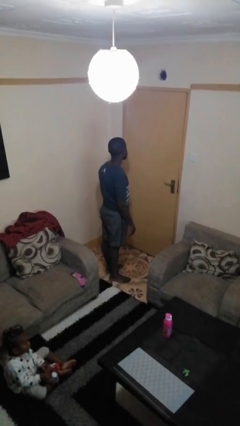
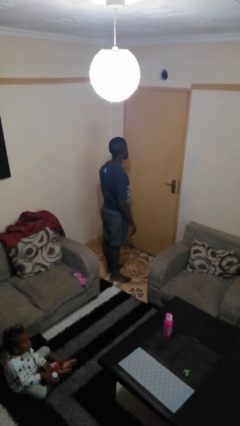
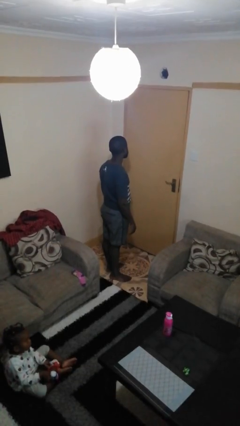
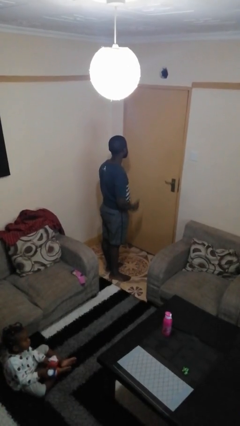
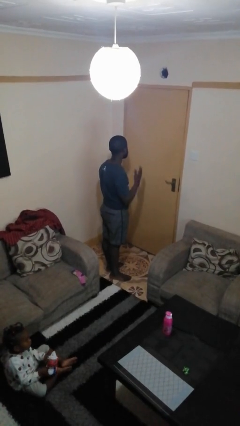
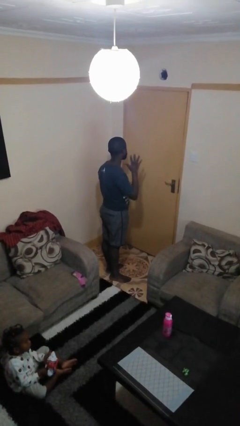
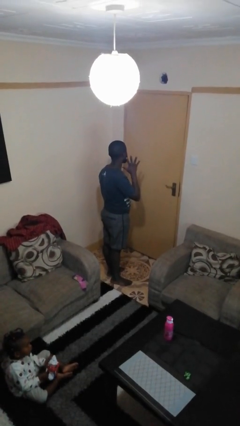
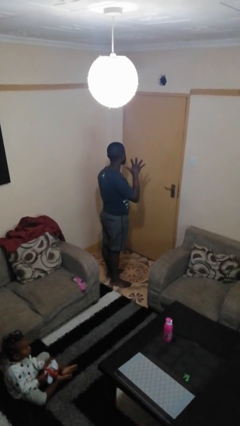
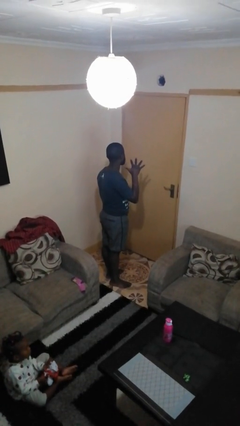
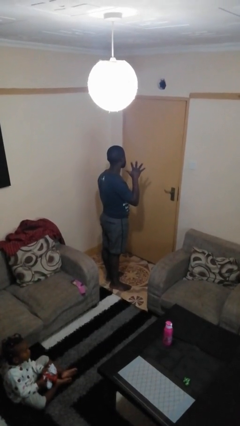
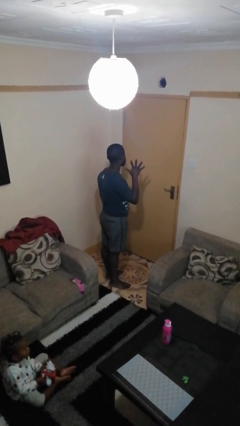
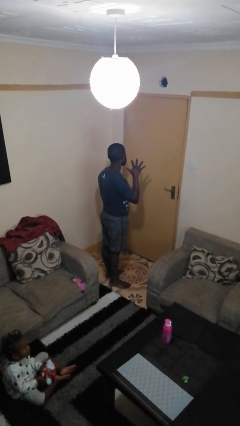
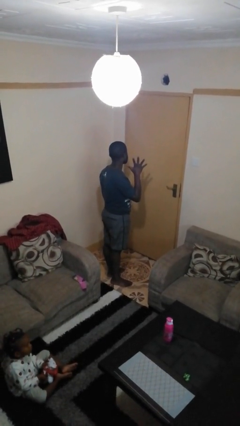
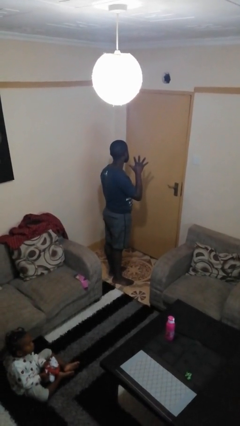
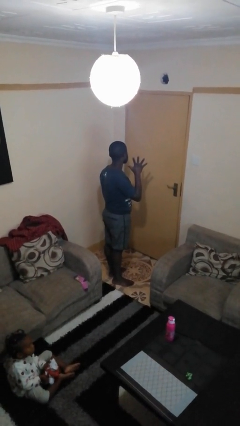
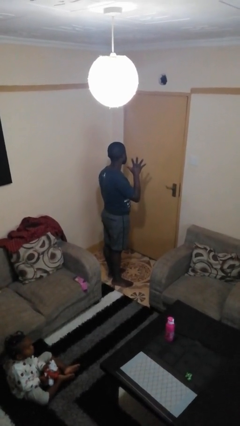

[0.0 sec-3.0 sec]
person gestures number five

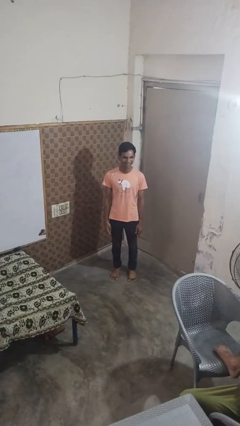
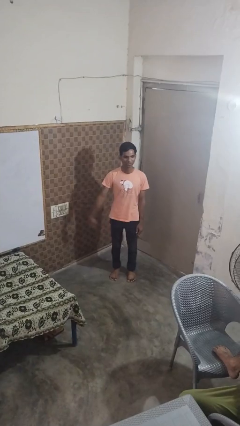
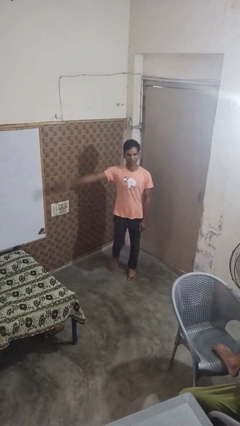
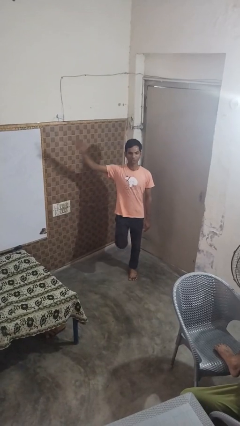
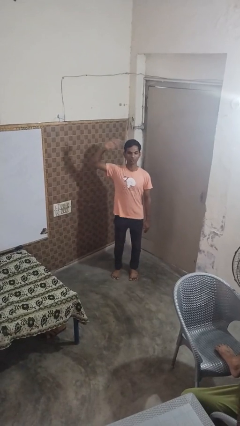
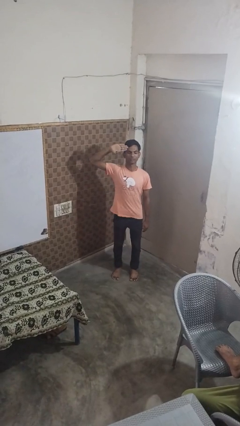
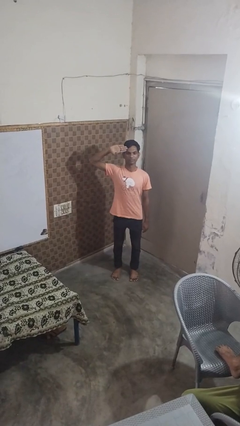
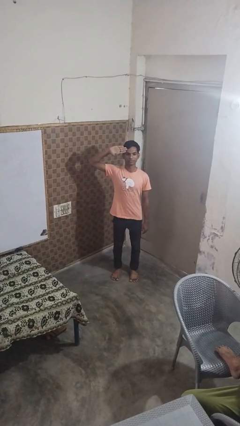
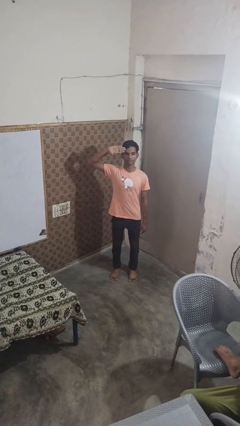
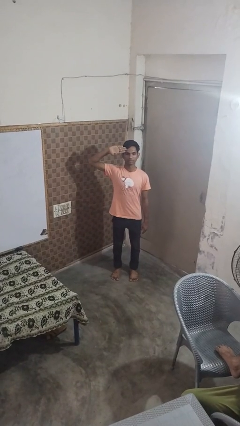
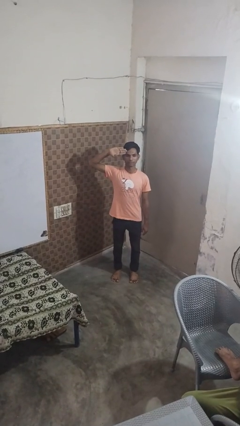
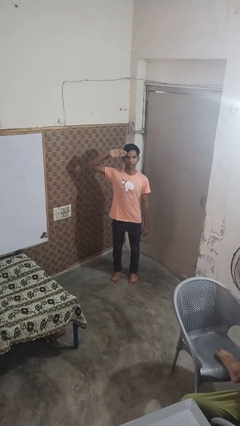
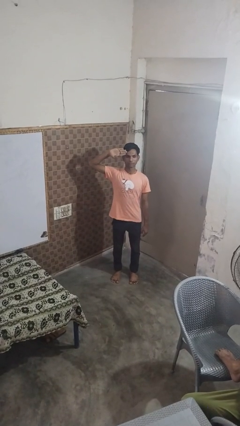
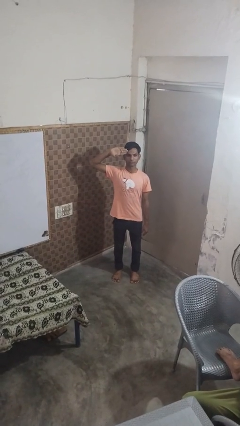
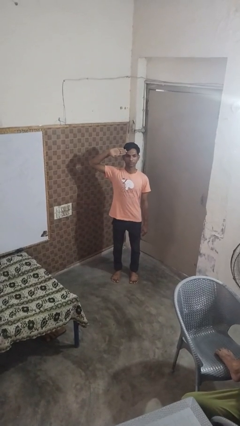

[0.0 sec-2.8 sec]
person salutes

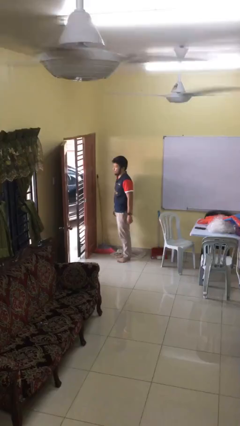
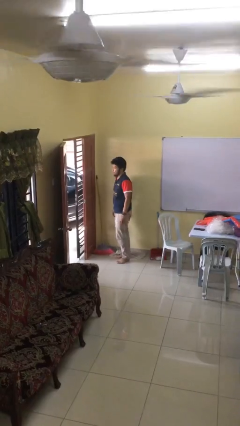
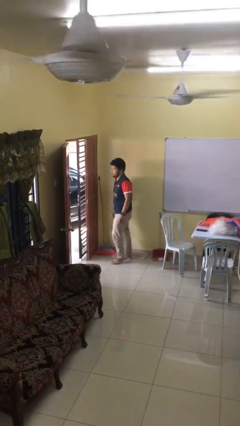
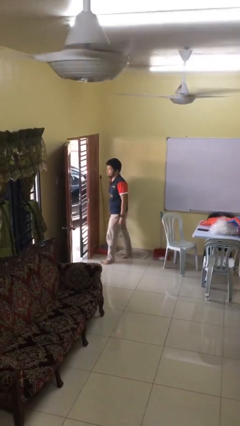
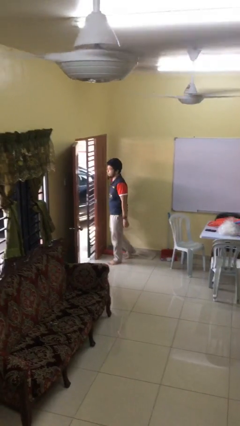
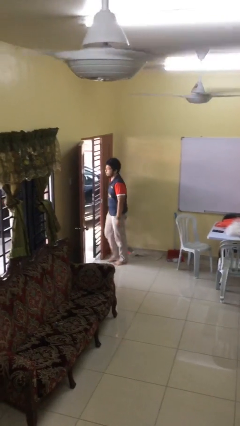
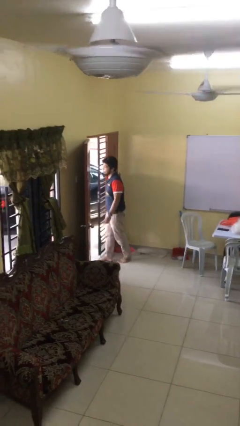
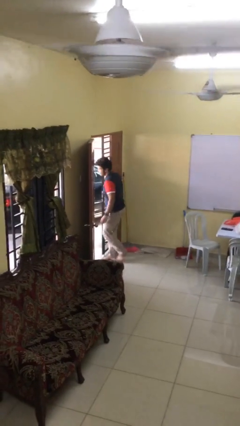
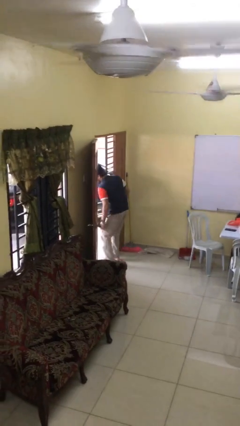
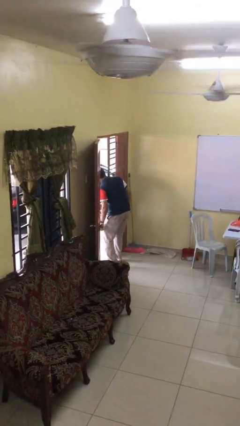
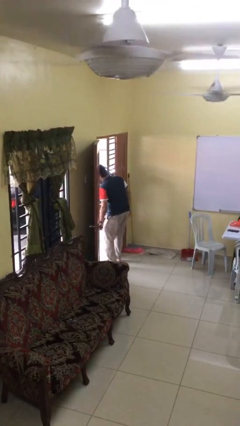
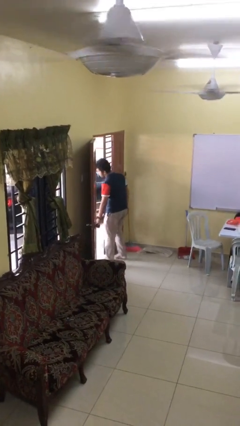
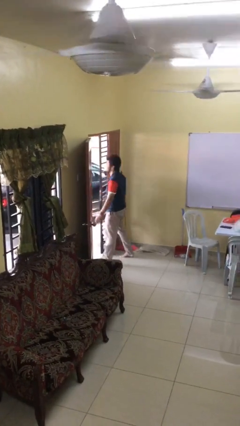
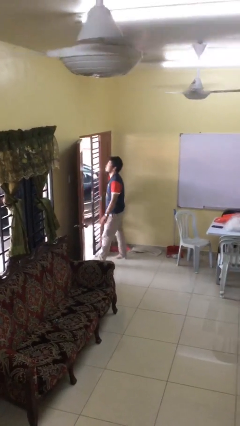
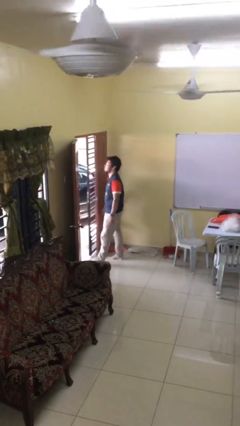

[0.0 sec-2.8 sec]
person bumps into wall

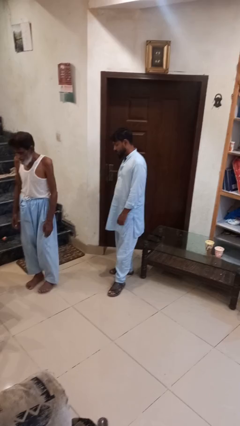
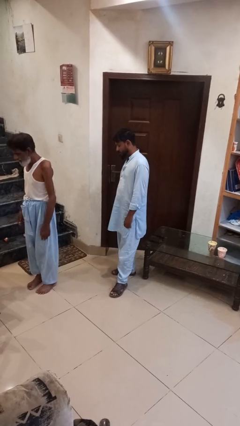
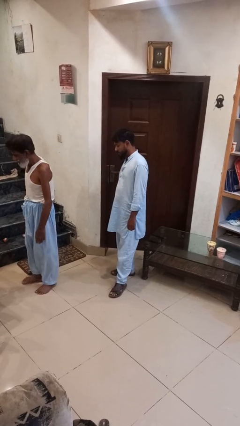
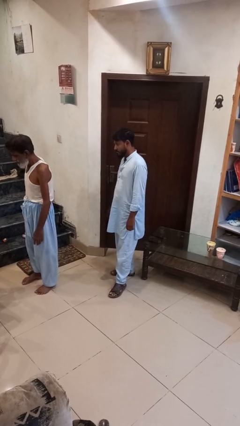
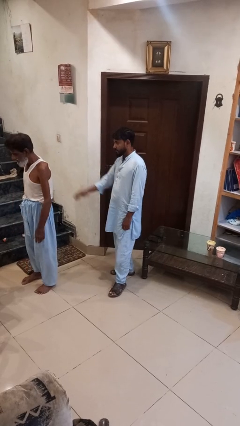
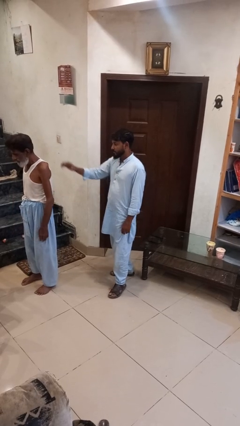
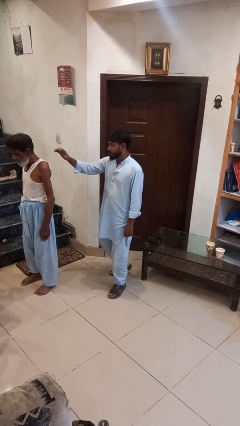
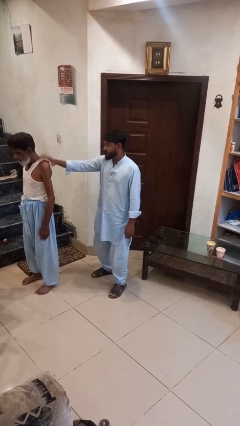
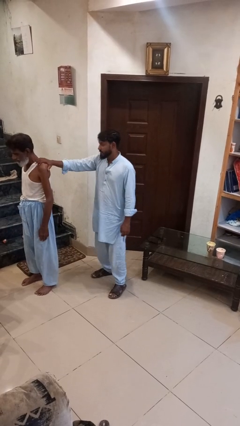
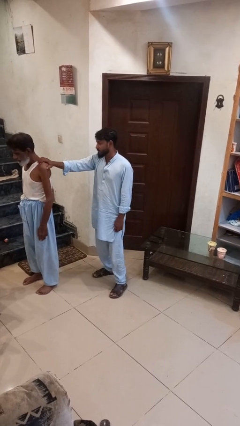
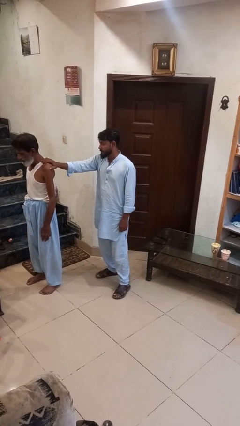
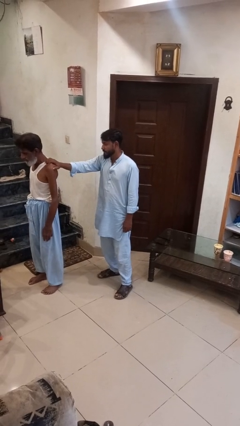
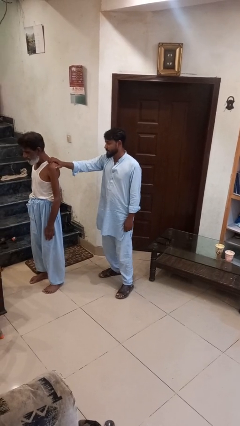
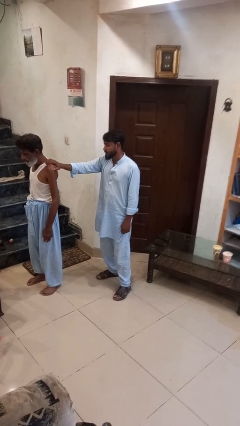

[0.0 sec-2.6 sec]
person grabs person by shoulder

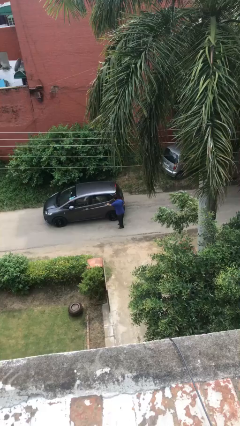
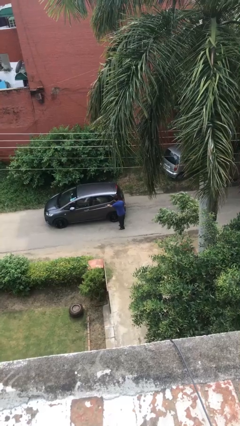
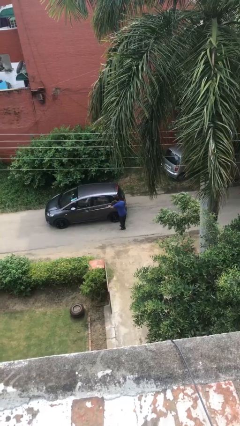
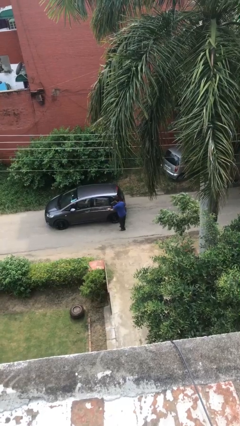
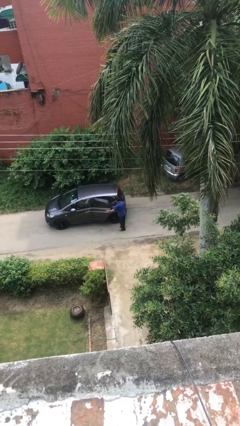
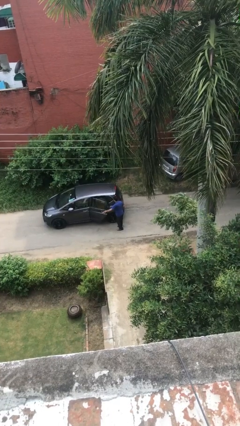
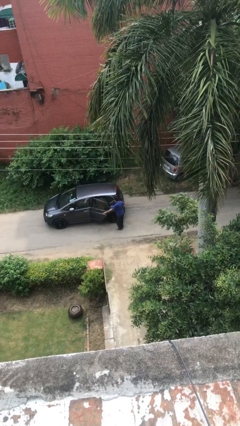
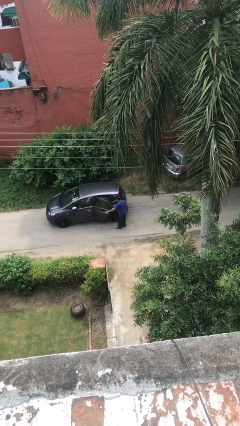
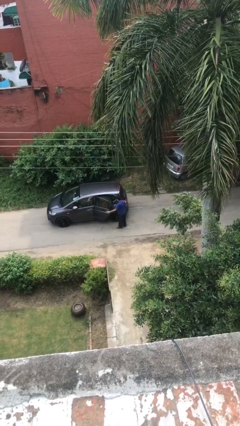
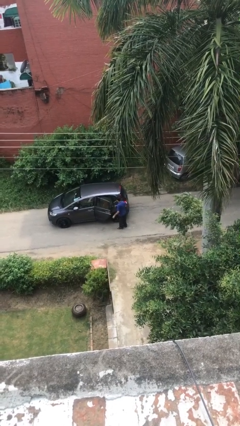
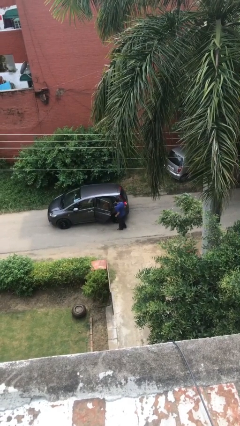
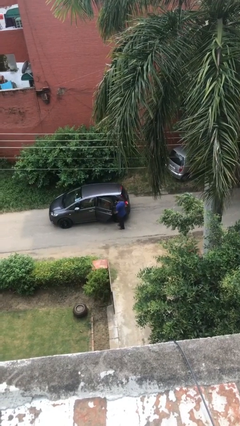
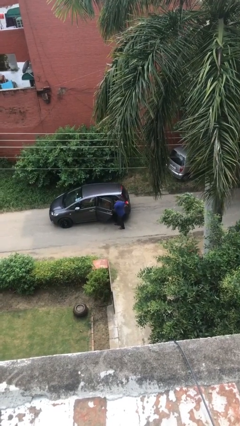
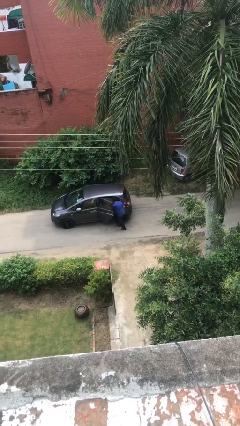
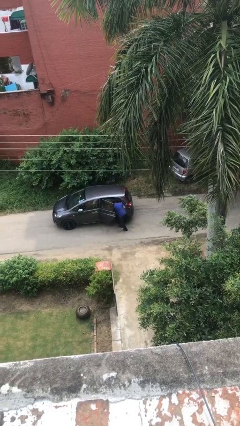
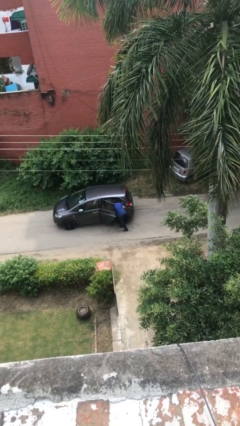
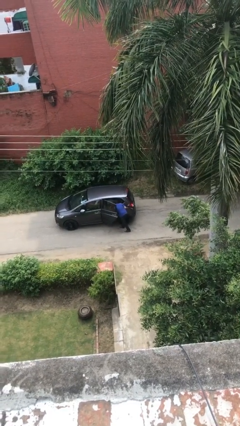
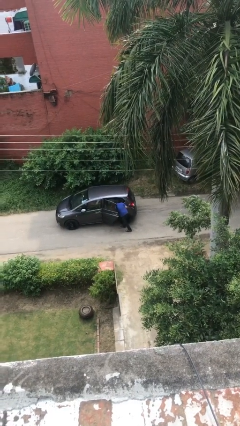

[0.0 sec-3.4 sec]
person opens car door

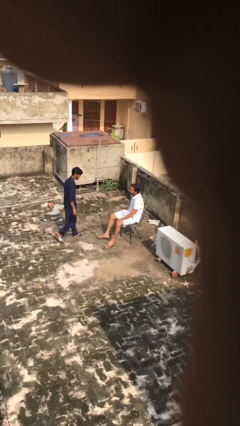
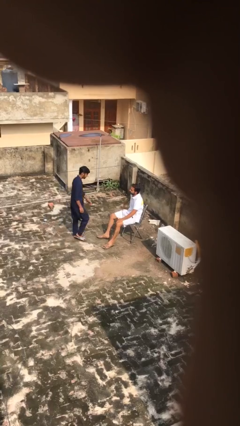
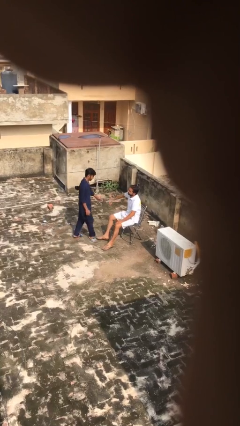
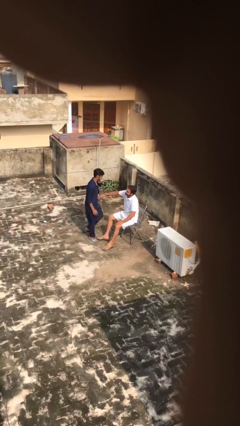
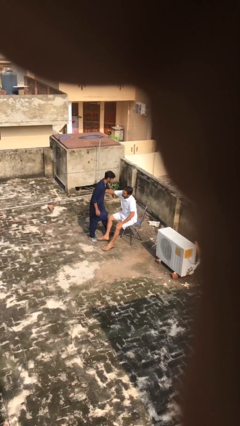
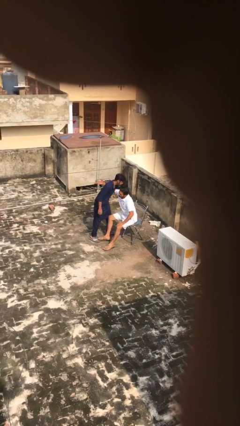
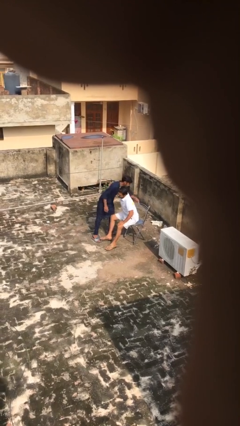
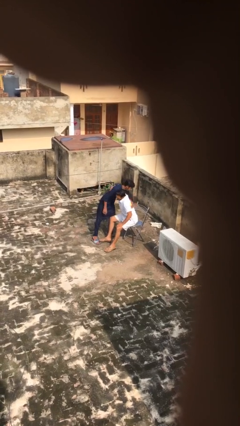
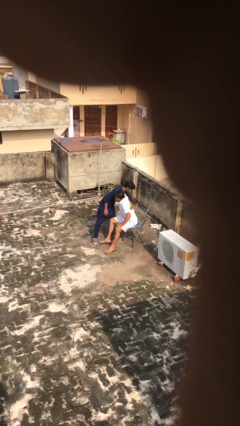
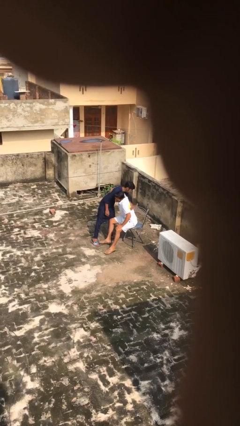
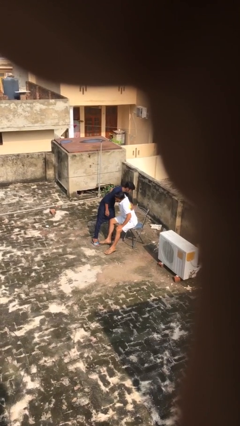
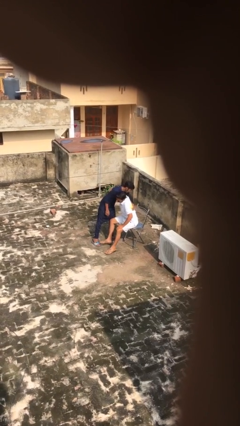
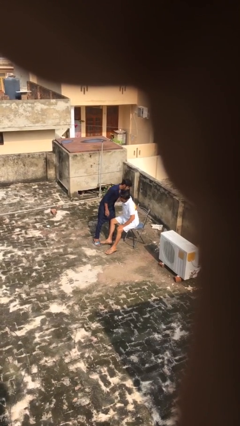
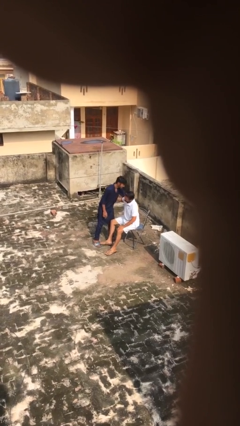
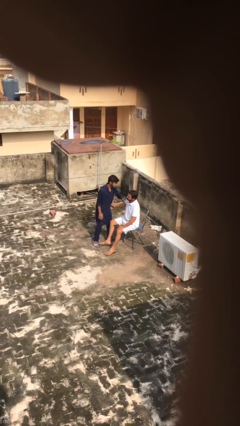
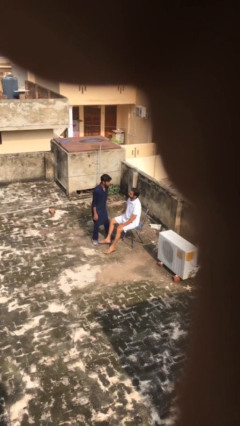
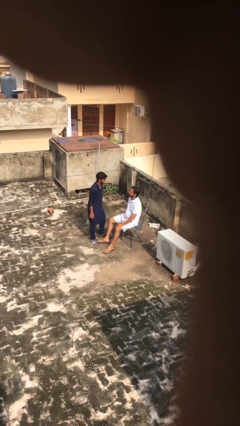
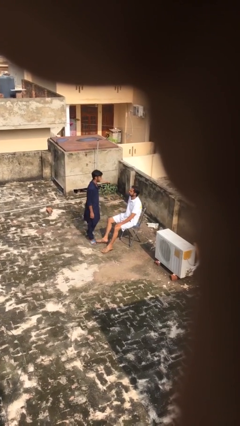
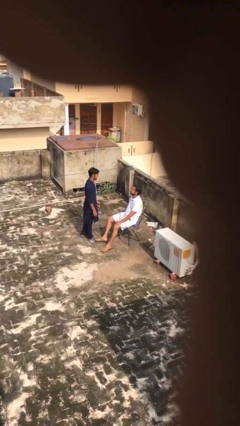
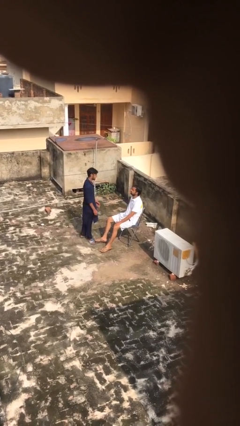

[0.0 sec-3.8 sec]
person embraces person
